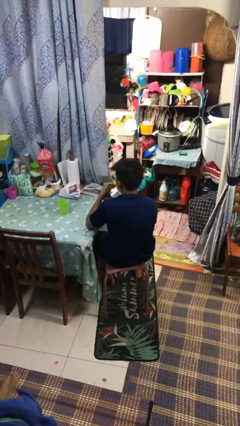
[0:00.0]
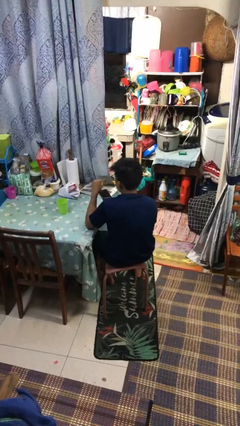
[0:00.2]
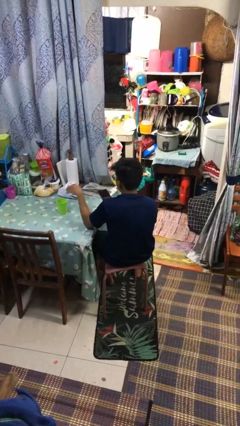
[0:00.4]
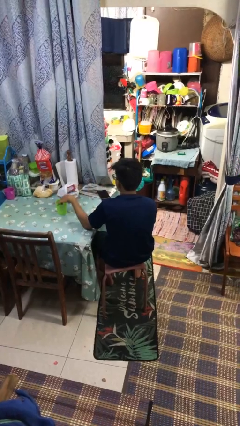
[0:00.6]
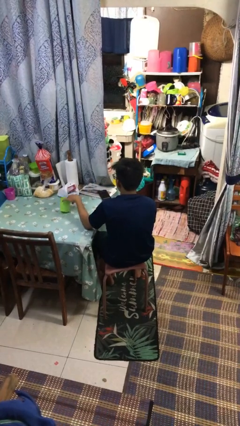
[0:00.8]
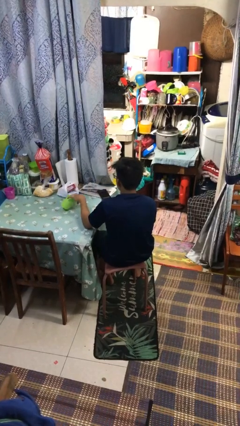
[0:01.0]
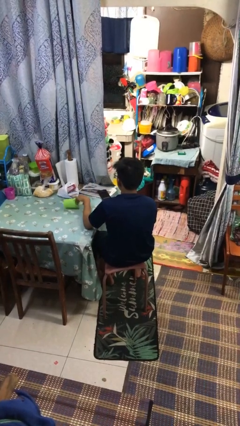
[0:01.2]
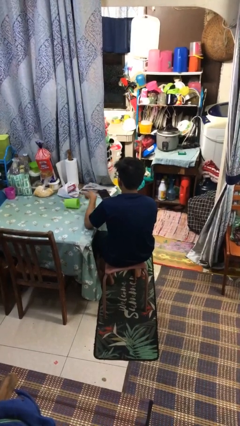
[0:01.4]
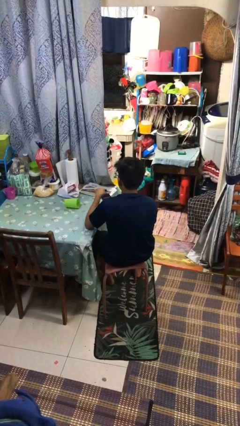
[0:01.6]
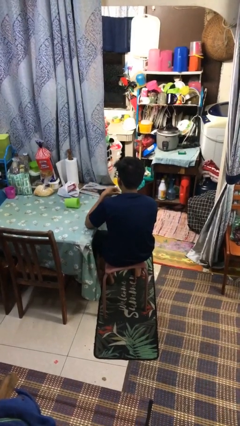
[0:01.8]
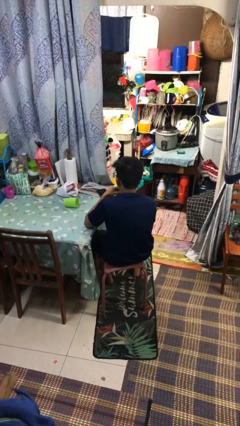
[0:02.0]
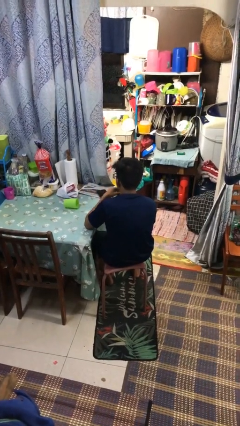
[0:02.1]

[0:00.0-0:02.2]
person knocks over glass

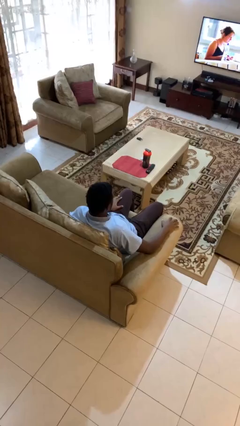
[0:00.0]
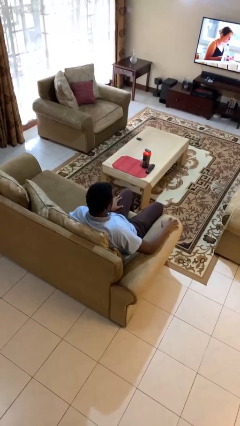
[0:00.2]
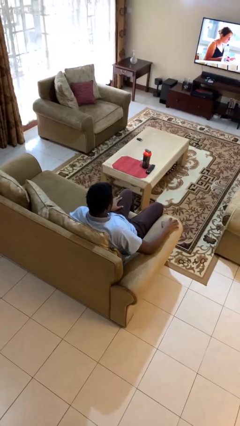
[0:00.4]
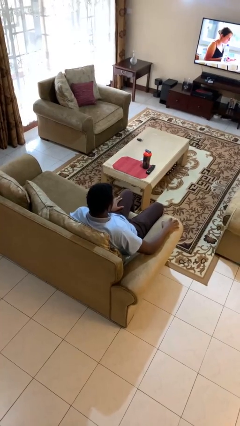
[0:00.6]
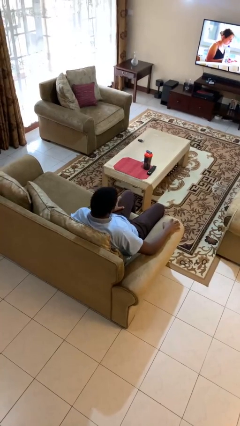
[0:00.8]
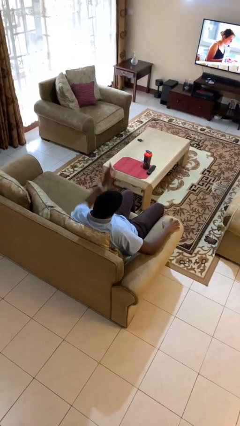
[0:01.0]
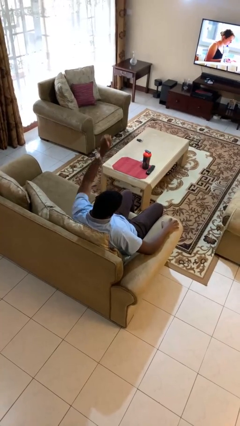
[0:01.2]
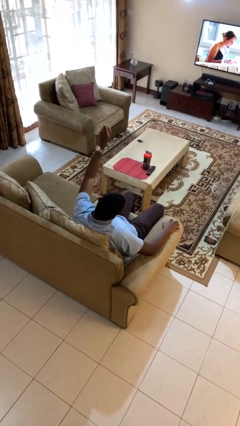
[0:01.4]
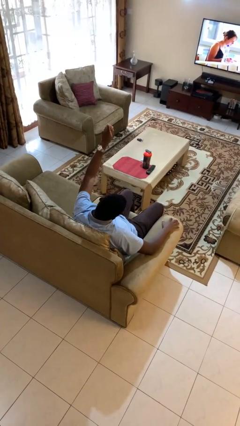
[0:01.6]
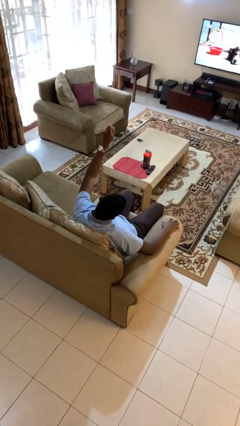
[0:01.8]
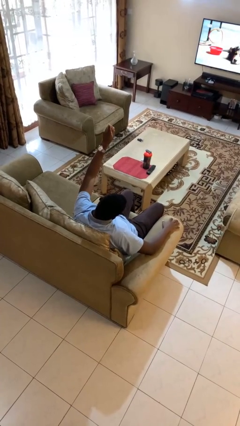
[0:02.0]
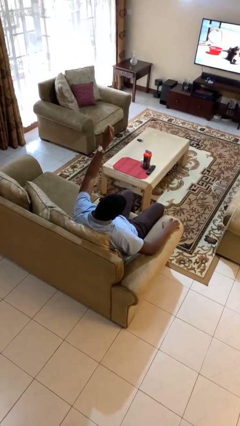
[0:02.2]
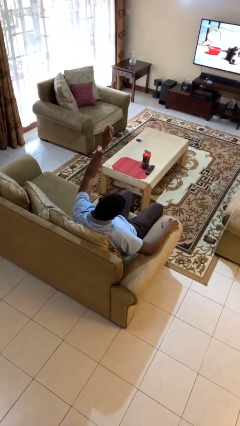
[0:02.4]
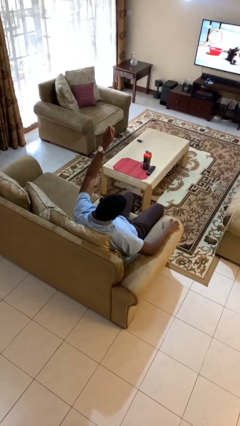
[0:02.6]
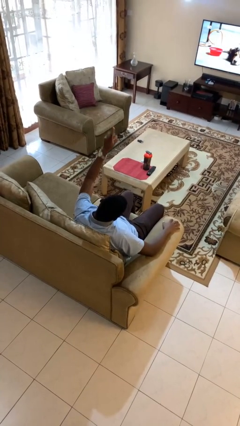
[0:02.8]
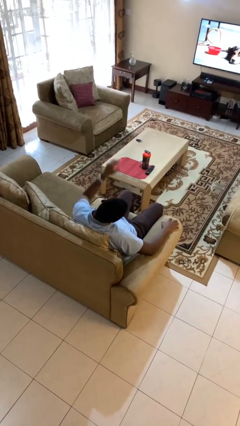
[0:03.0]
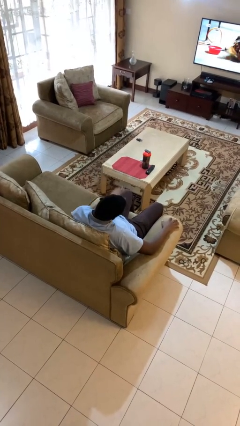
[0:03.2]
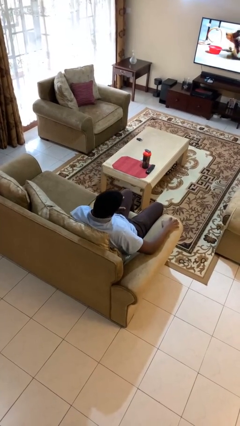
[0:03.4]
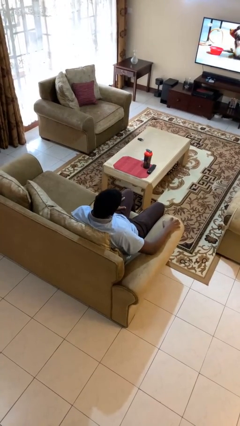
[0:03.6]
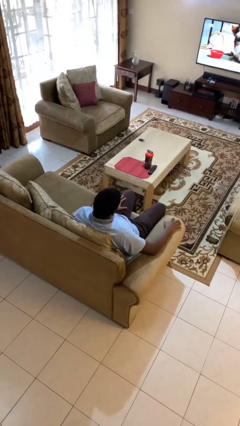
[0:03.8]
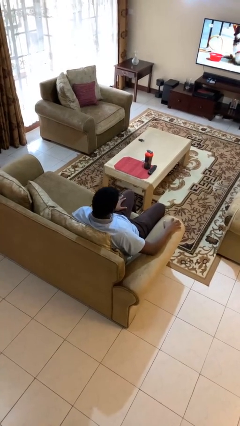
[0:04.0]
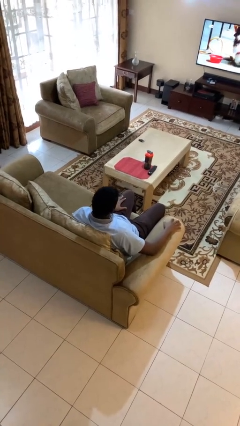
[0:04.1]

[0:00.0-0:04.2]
person gestures number one

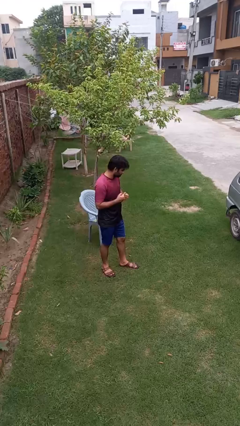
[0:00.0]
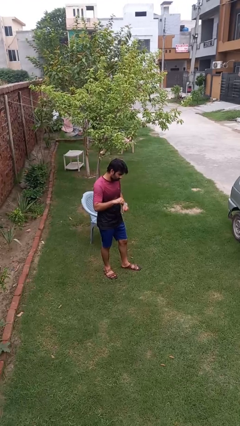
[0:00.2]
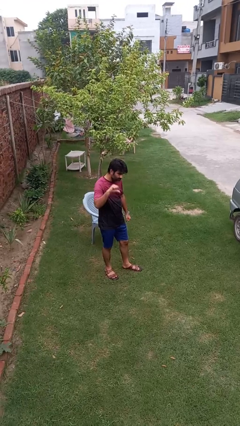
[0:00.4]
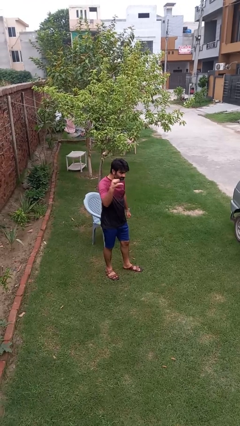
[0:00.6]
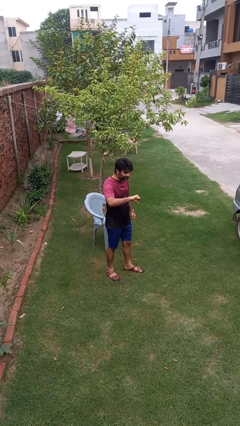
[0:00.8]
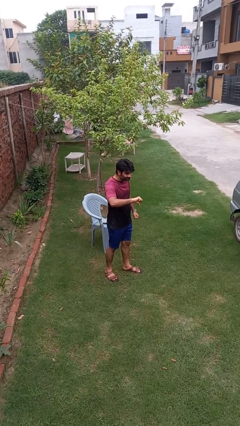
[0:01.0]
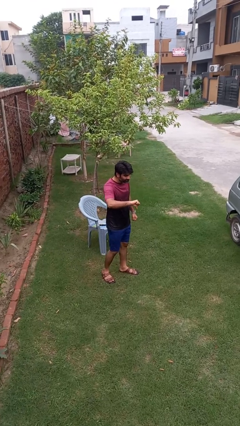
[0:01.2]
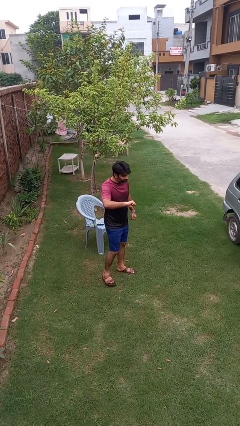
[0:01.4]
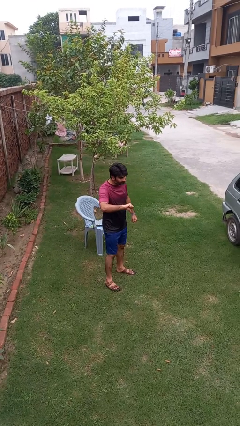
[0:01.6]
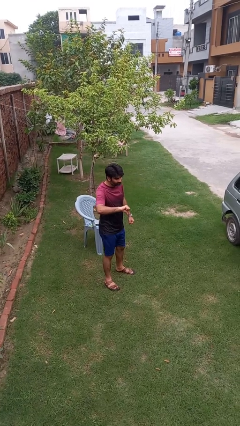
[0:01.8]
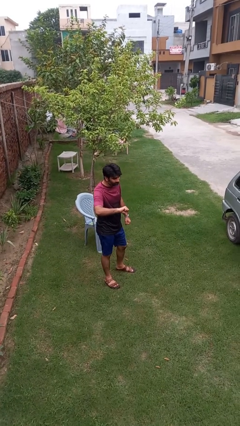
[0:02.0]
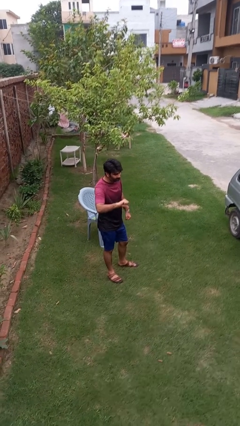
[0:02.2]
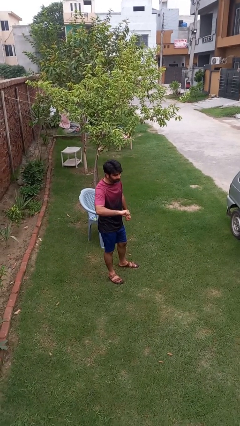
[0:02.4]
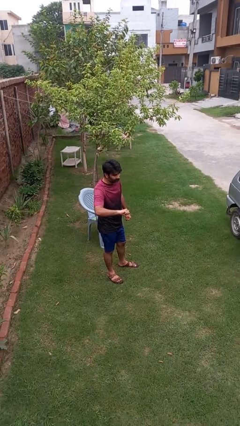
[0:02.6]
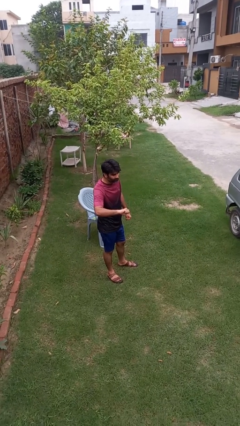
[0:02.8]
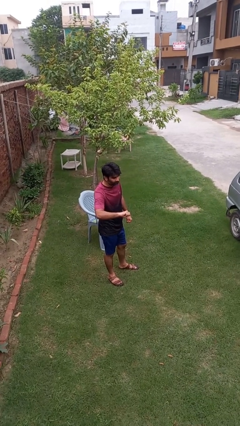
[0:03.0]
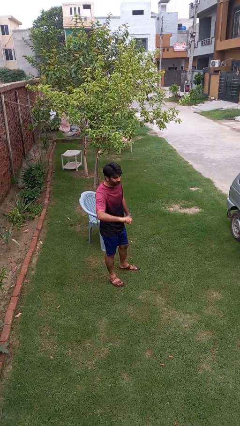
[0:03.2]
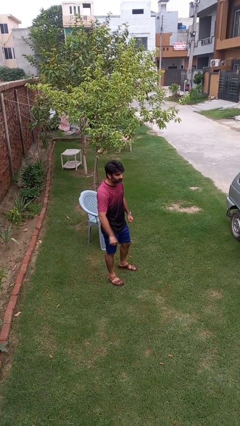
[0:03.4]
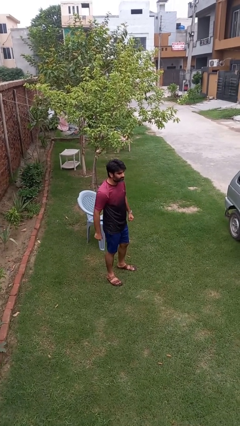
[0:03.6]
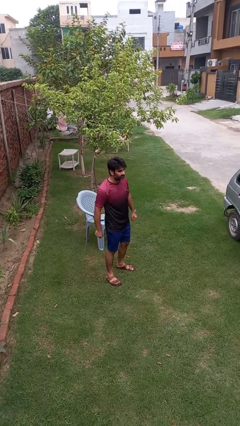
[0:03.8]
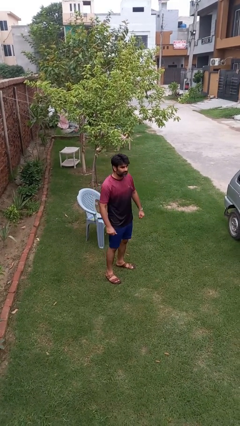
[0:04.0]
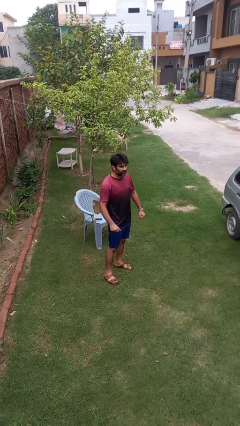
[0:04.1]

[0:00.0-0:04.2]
person gestures thumbs down

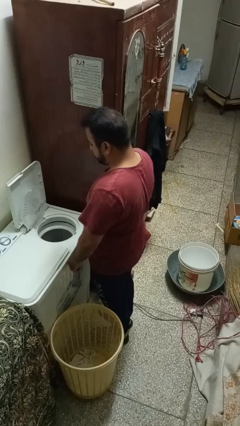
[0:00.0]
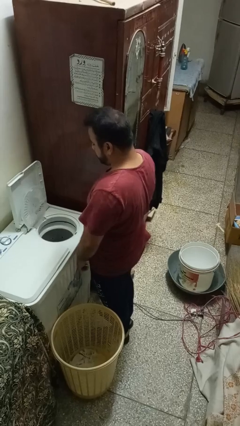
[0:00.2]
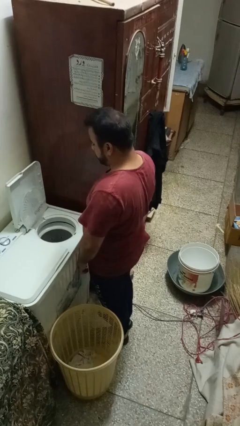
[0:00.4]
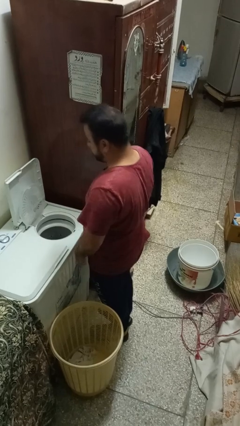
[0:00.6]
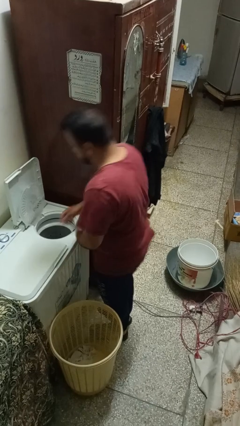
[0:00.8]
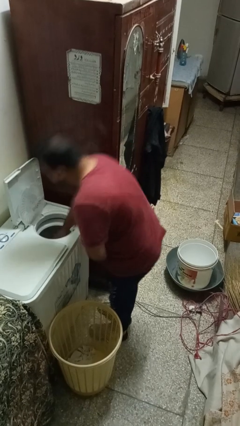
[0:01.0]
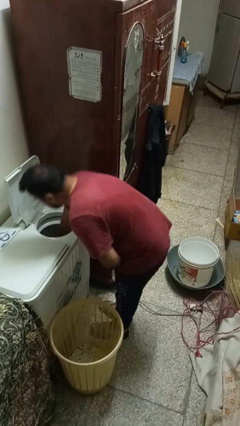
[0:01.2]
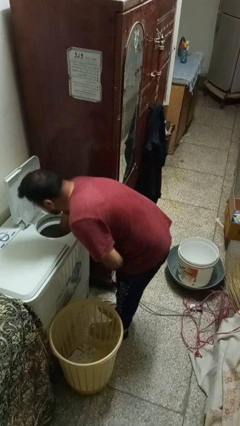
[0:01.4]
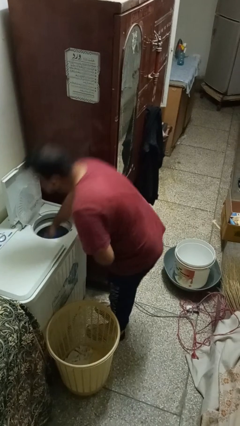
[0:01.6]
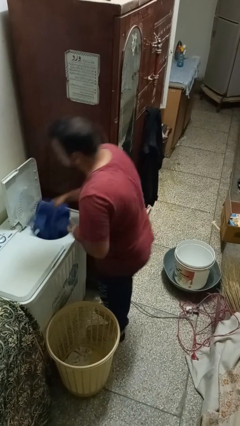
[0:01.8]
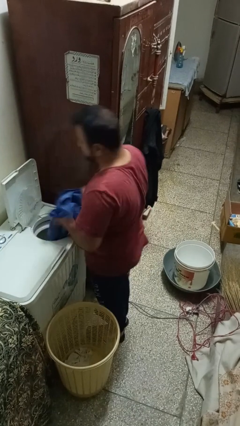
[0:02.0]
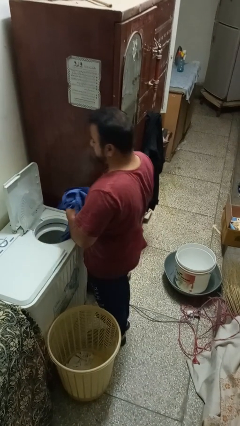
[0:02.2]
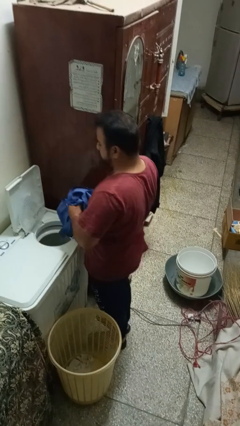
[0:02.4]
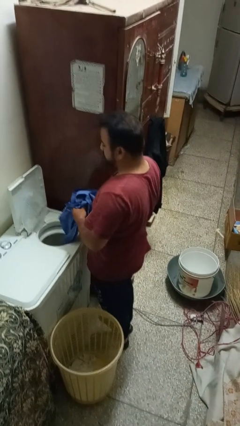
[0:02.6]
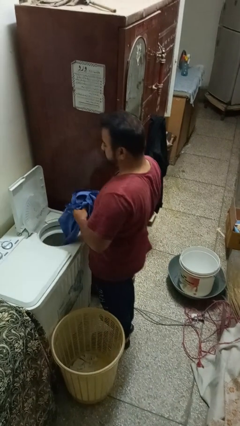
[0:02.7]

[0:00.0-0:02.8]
person unloads dryer

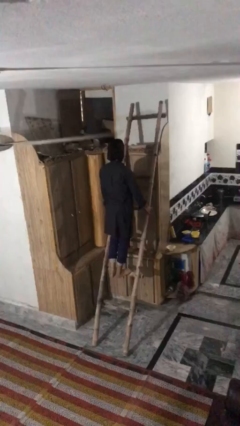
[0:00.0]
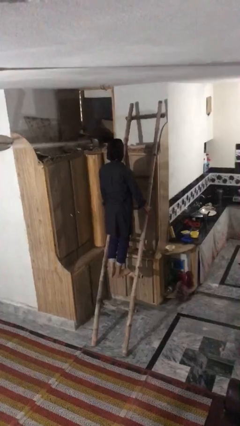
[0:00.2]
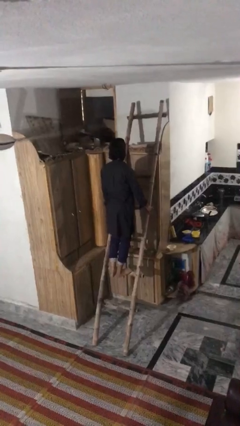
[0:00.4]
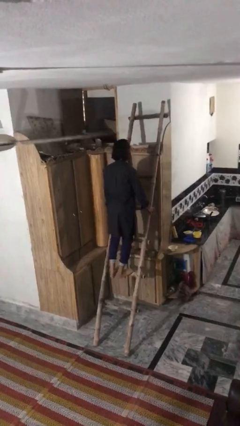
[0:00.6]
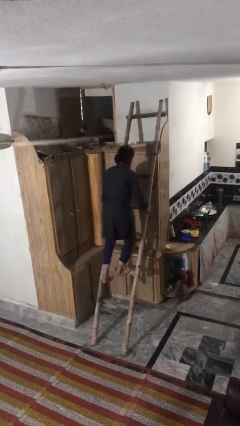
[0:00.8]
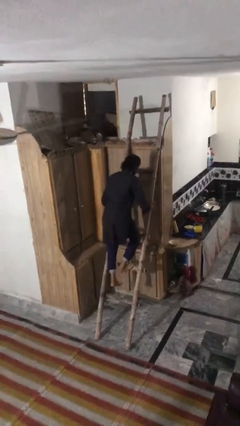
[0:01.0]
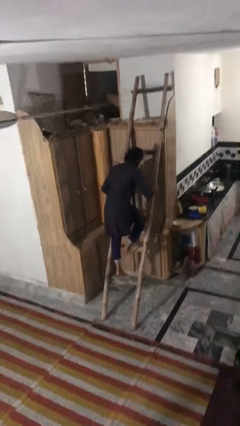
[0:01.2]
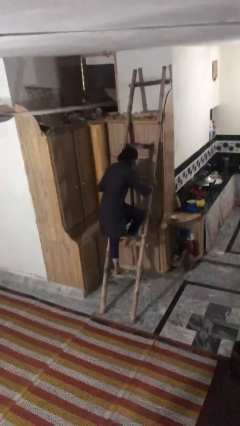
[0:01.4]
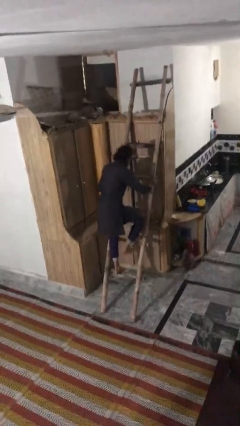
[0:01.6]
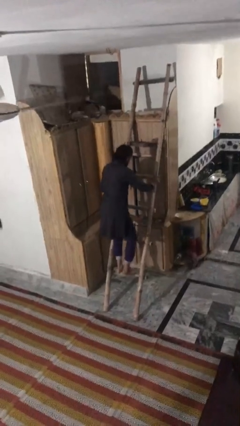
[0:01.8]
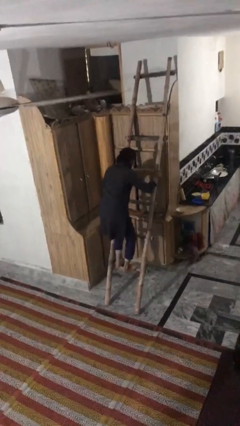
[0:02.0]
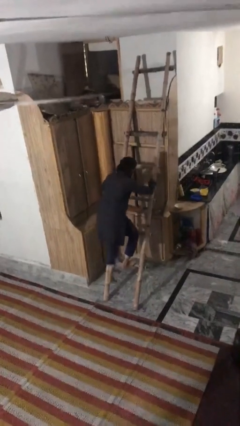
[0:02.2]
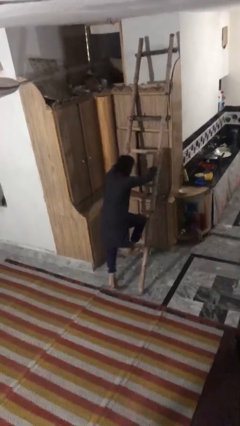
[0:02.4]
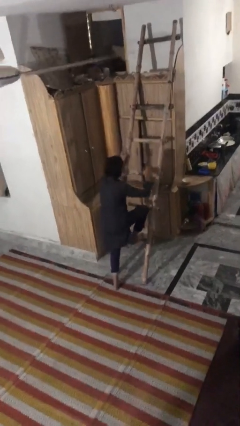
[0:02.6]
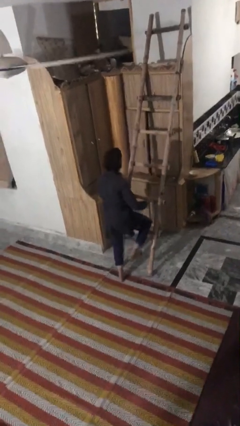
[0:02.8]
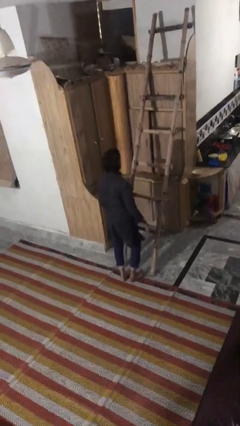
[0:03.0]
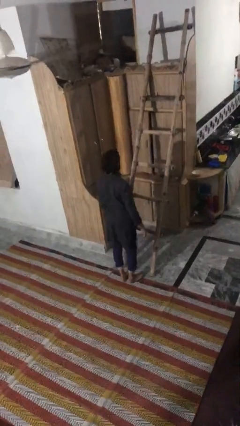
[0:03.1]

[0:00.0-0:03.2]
person climbs down ladder

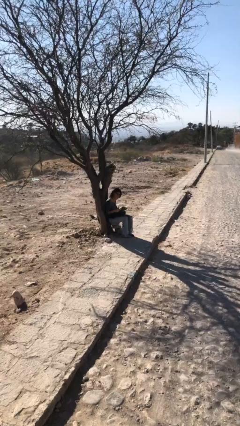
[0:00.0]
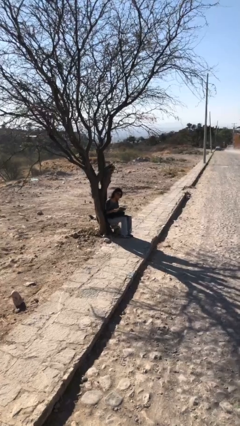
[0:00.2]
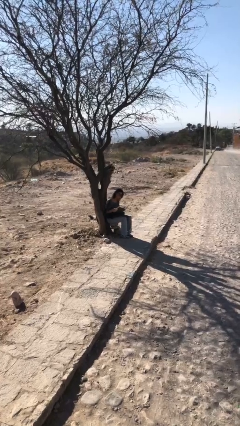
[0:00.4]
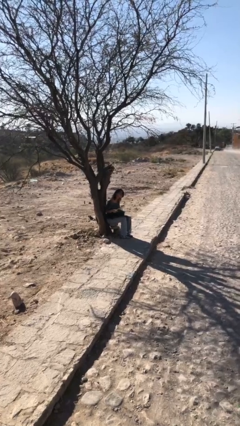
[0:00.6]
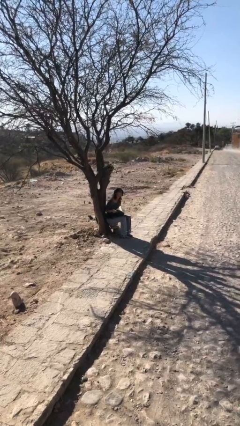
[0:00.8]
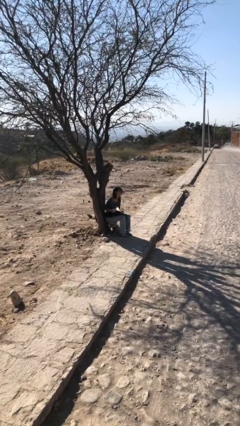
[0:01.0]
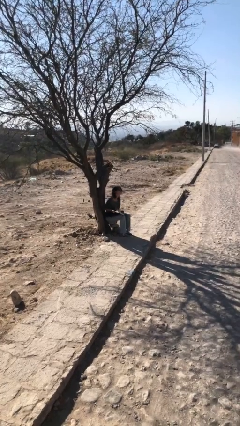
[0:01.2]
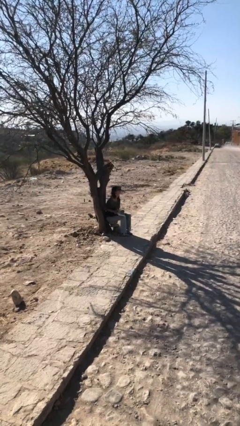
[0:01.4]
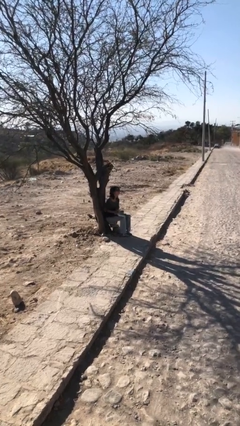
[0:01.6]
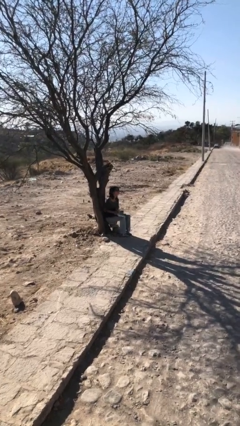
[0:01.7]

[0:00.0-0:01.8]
person reads document
